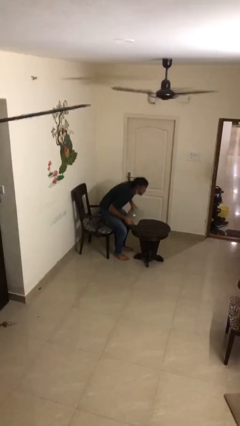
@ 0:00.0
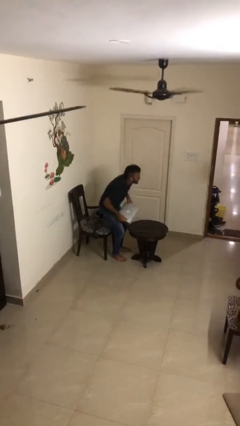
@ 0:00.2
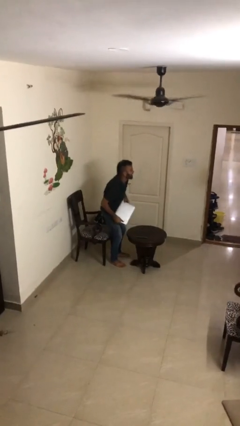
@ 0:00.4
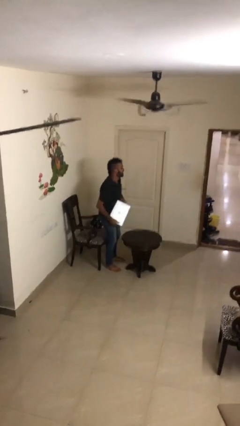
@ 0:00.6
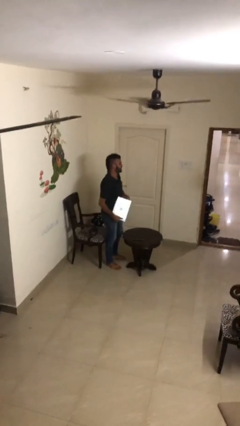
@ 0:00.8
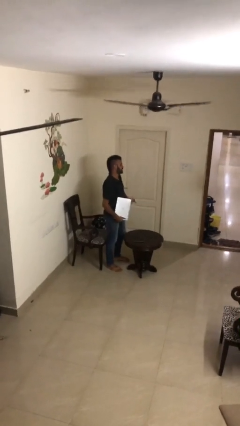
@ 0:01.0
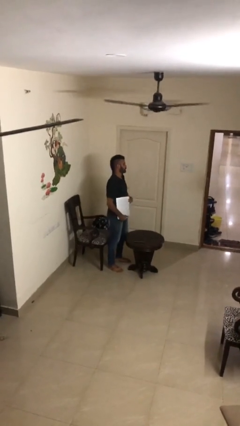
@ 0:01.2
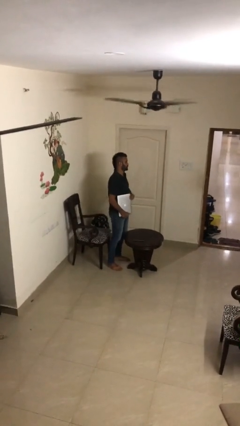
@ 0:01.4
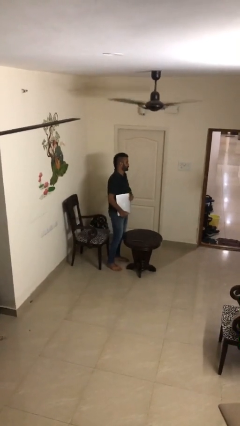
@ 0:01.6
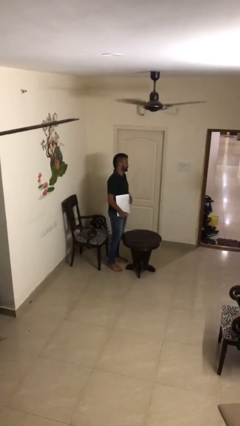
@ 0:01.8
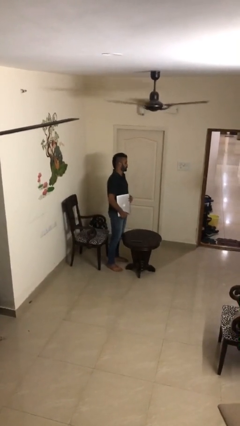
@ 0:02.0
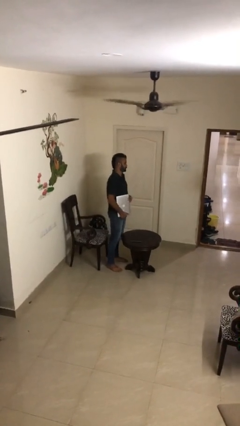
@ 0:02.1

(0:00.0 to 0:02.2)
person stands up

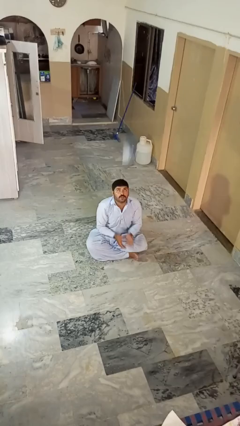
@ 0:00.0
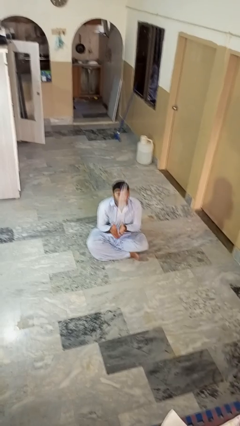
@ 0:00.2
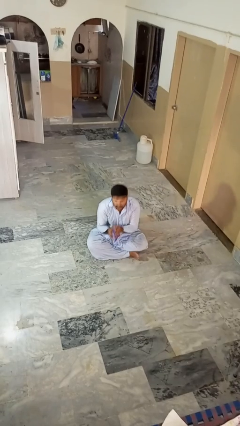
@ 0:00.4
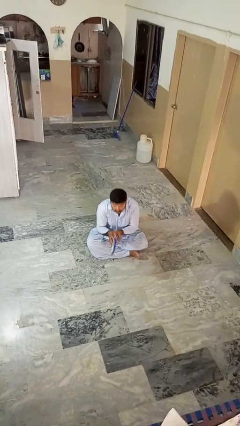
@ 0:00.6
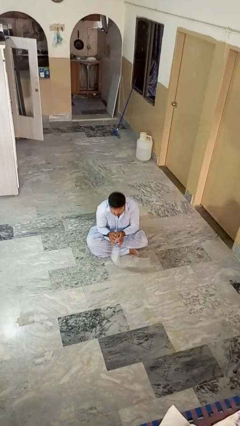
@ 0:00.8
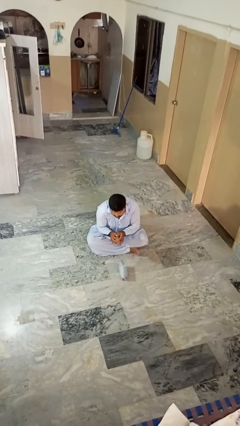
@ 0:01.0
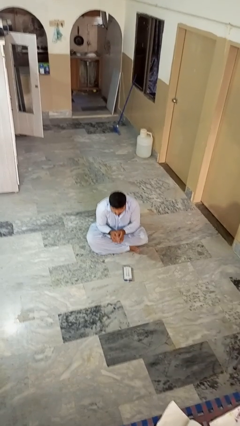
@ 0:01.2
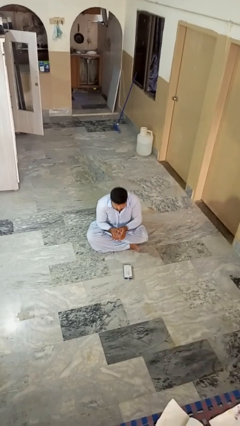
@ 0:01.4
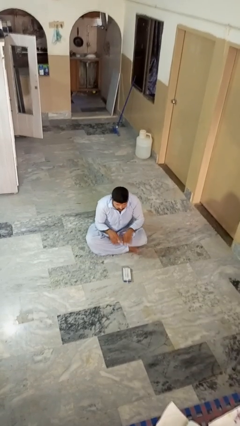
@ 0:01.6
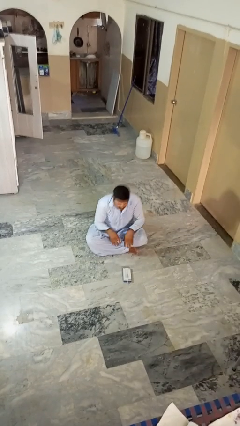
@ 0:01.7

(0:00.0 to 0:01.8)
person catches dropped object

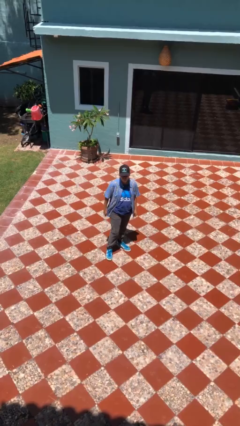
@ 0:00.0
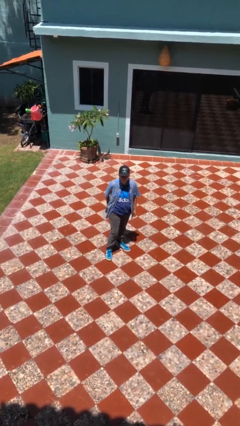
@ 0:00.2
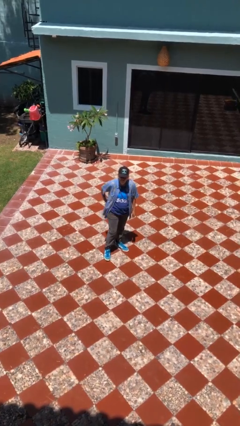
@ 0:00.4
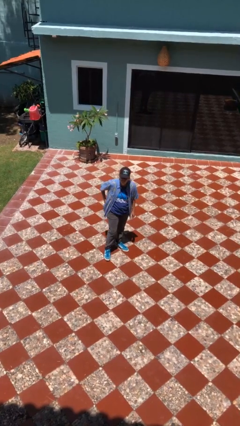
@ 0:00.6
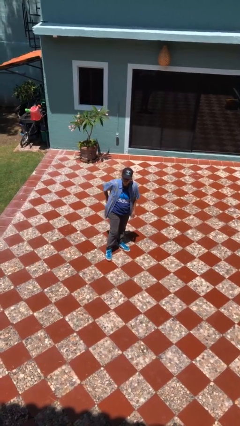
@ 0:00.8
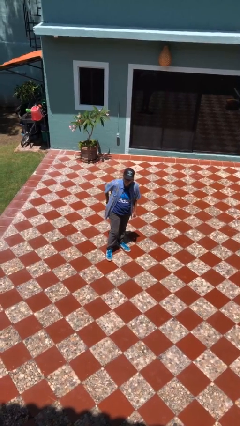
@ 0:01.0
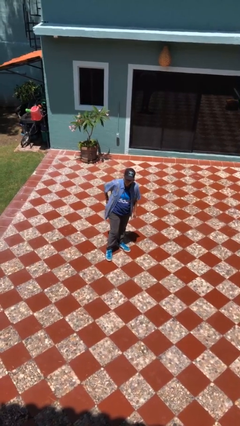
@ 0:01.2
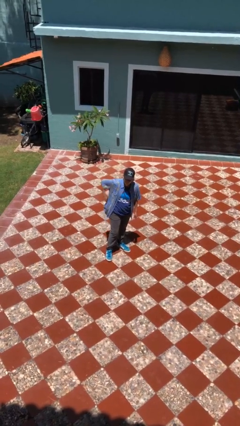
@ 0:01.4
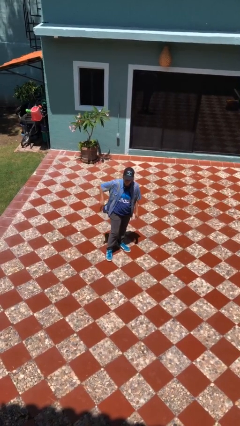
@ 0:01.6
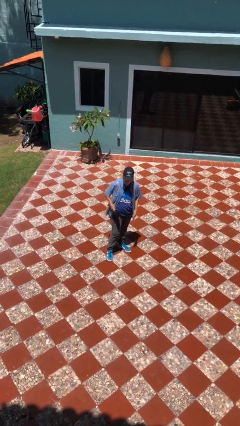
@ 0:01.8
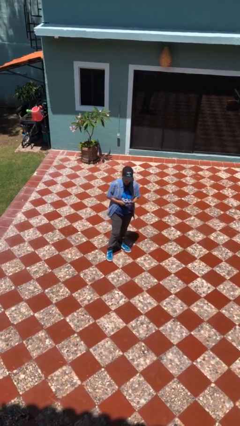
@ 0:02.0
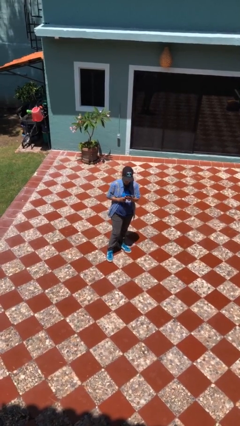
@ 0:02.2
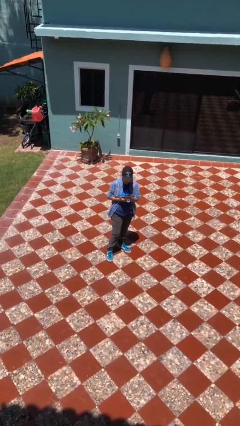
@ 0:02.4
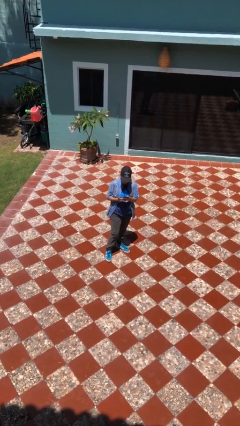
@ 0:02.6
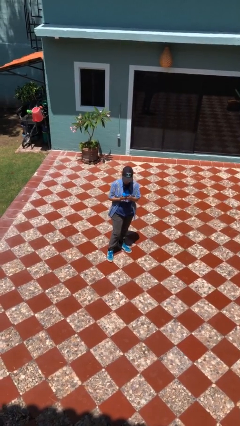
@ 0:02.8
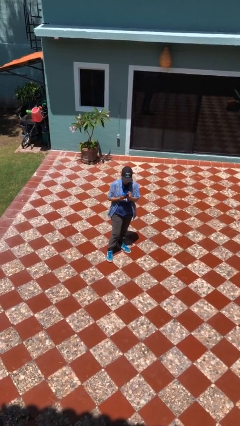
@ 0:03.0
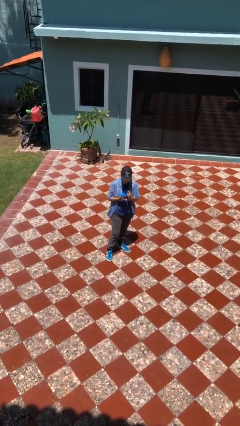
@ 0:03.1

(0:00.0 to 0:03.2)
person takes phone from pocket

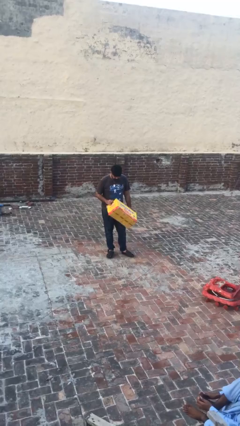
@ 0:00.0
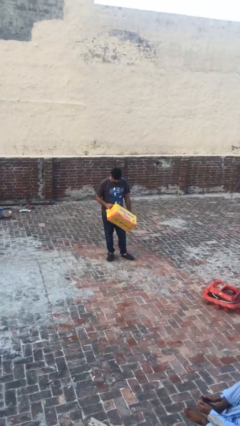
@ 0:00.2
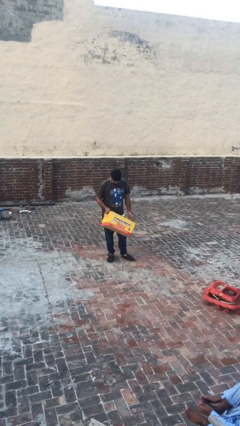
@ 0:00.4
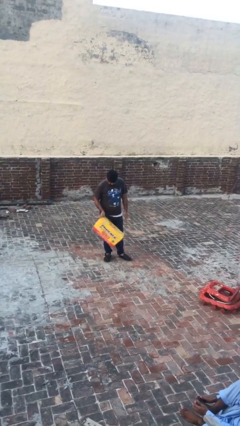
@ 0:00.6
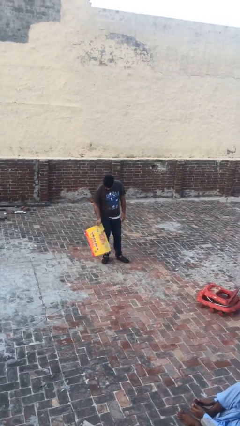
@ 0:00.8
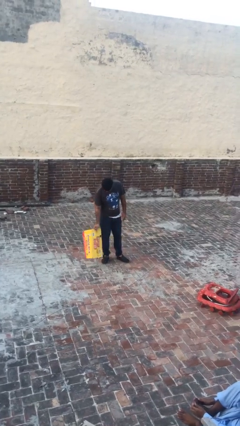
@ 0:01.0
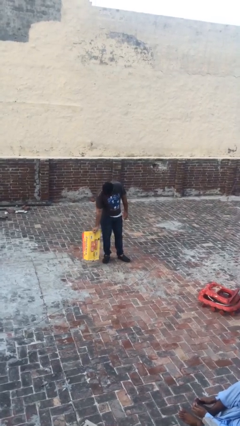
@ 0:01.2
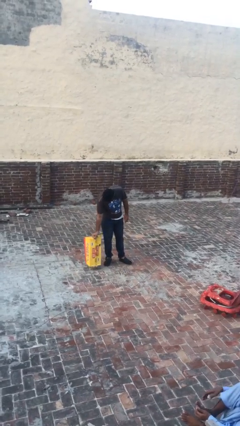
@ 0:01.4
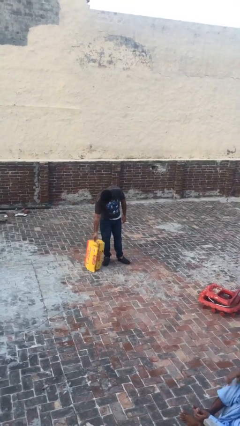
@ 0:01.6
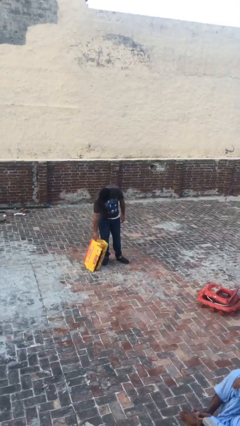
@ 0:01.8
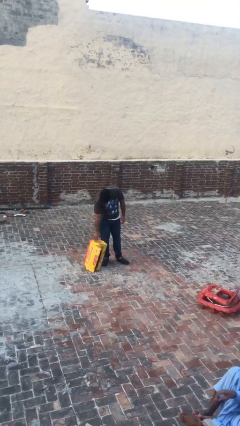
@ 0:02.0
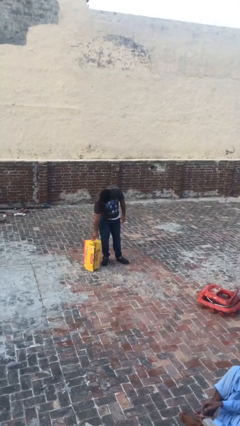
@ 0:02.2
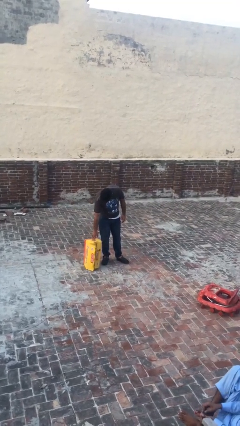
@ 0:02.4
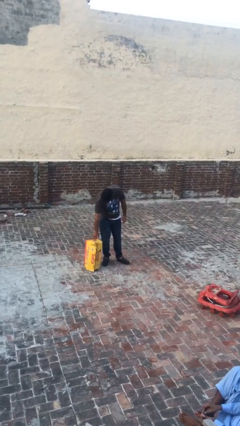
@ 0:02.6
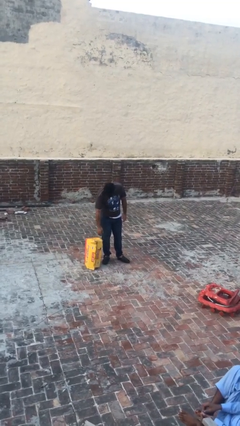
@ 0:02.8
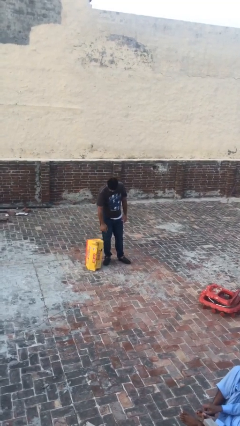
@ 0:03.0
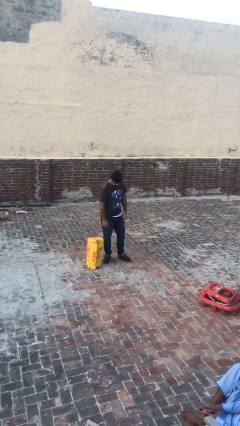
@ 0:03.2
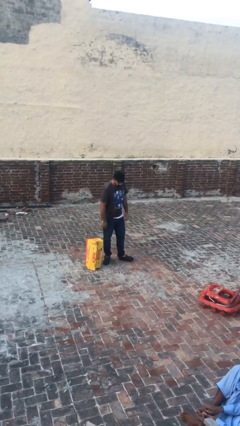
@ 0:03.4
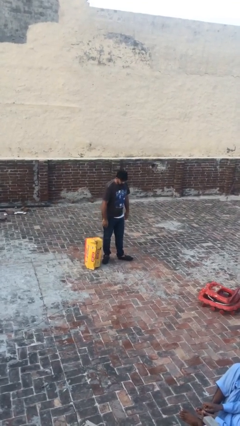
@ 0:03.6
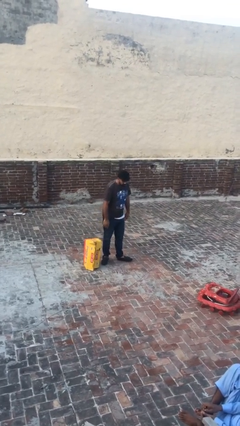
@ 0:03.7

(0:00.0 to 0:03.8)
person puts down object on floor

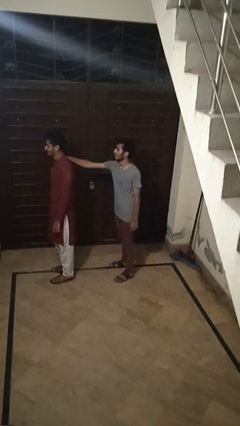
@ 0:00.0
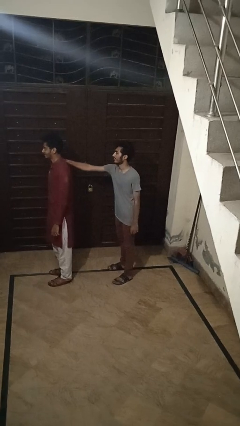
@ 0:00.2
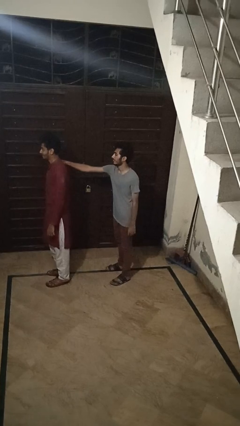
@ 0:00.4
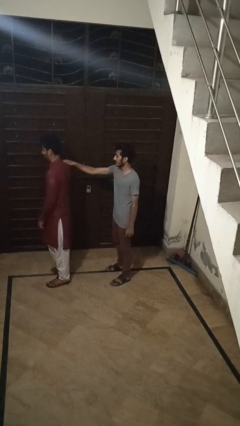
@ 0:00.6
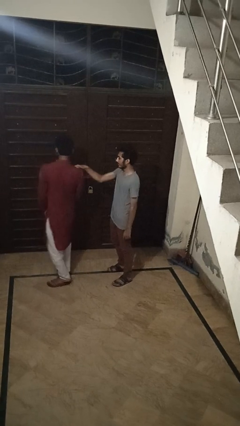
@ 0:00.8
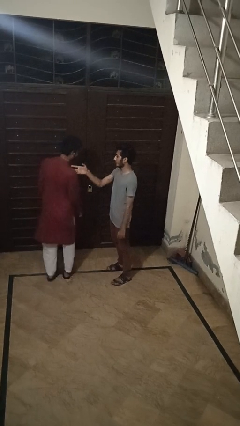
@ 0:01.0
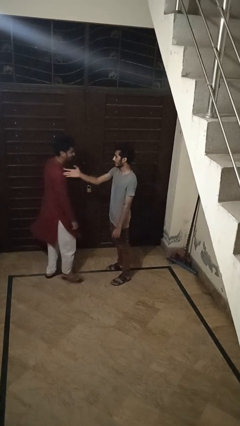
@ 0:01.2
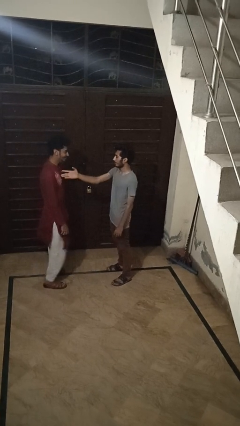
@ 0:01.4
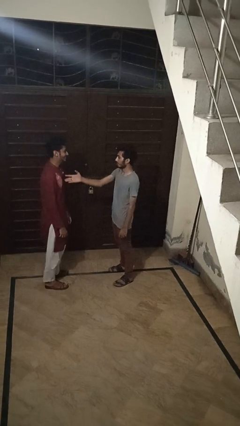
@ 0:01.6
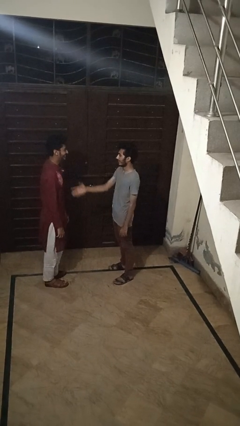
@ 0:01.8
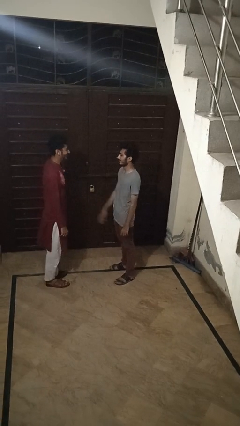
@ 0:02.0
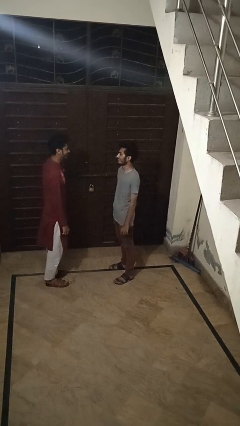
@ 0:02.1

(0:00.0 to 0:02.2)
person spins person around

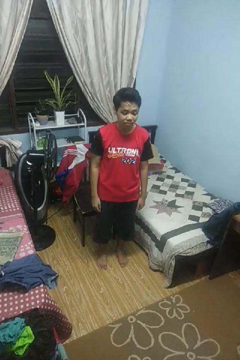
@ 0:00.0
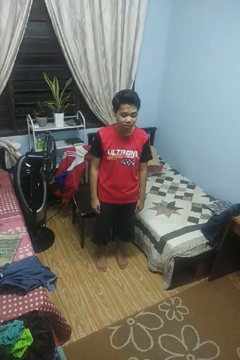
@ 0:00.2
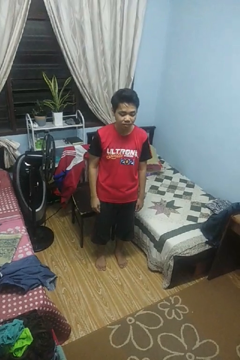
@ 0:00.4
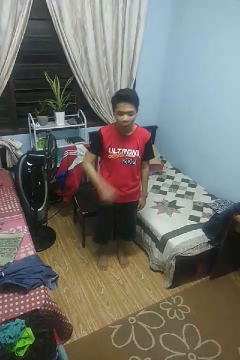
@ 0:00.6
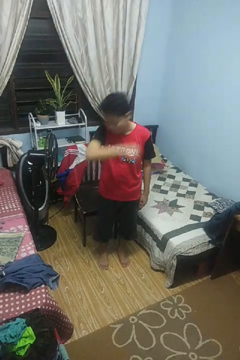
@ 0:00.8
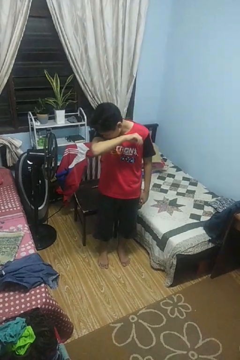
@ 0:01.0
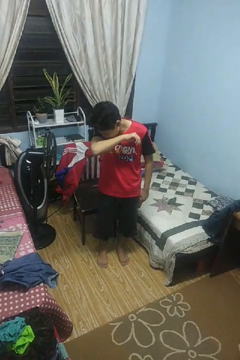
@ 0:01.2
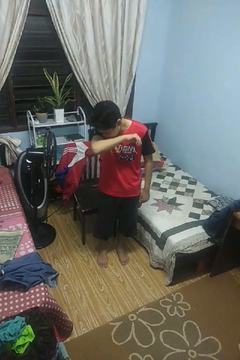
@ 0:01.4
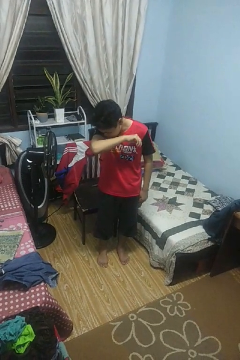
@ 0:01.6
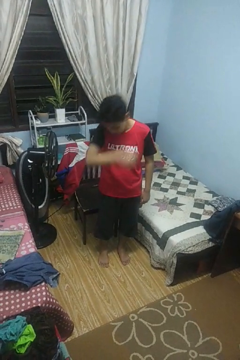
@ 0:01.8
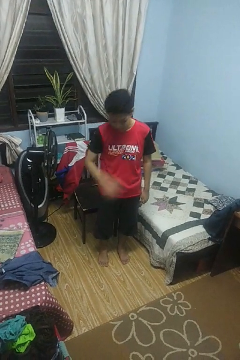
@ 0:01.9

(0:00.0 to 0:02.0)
person sneezes into arm

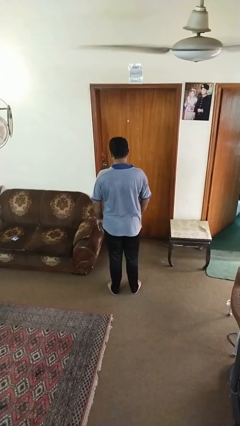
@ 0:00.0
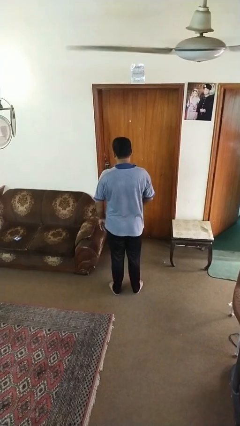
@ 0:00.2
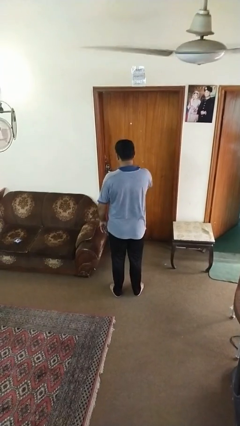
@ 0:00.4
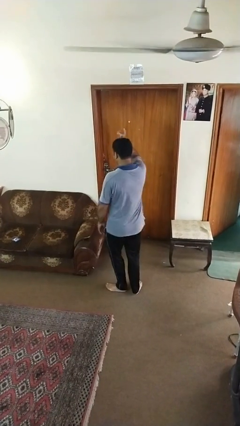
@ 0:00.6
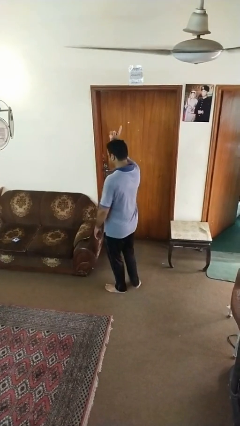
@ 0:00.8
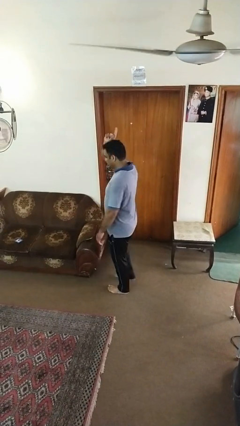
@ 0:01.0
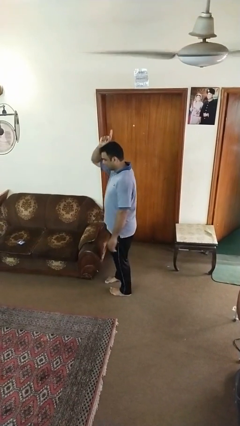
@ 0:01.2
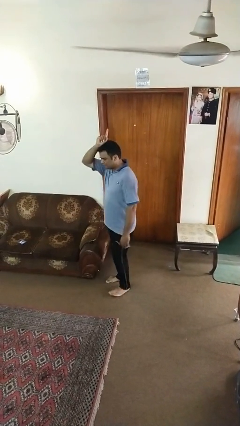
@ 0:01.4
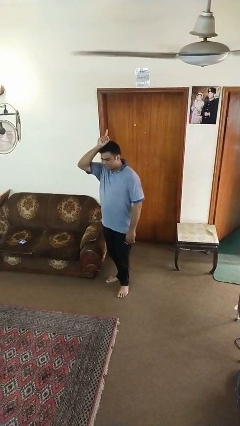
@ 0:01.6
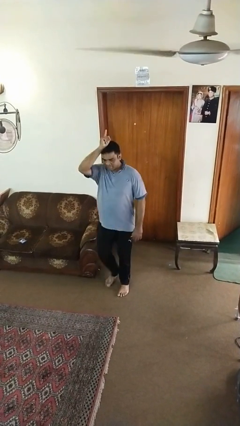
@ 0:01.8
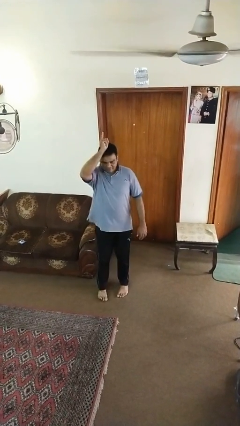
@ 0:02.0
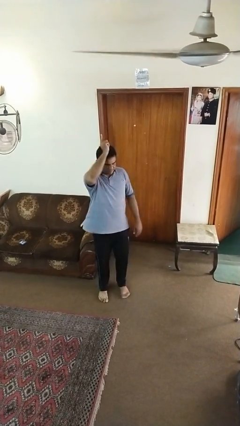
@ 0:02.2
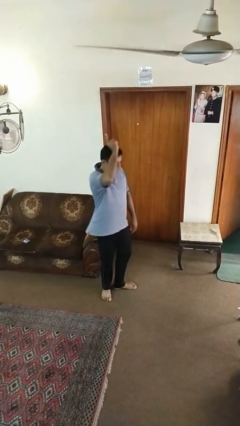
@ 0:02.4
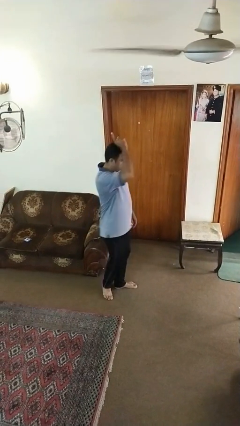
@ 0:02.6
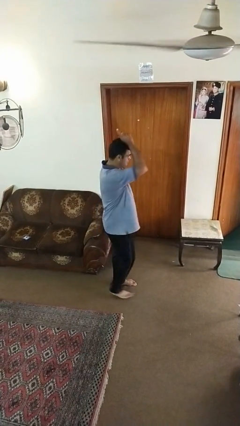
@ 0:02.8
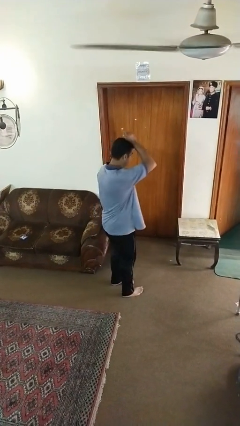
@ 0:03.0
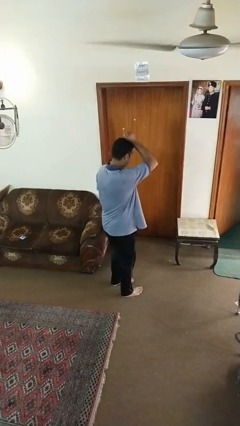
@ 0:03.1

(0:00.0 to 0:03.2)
person twirls
